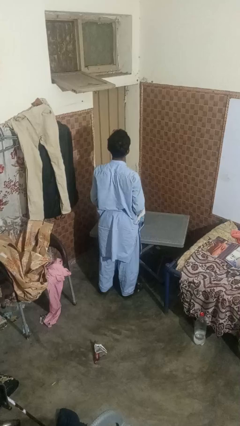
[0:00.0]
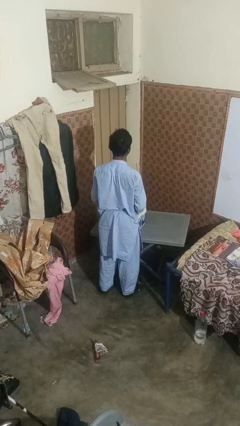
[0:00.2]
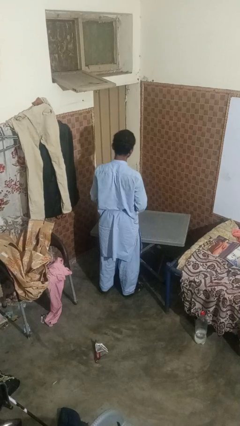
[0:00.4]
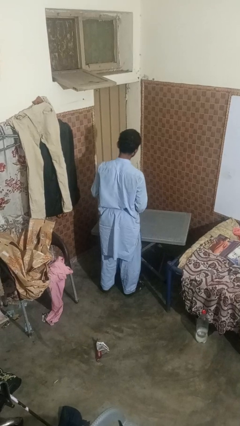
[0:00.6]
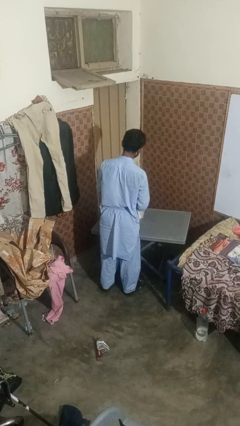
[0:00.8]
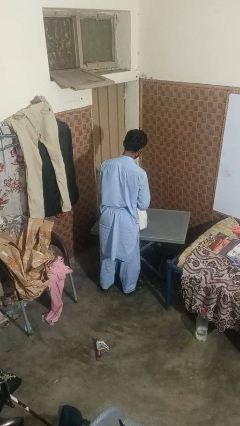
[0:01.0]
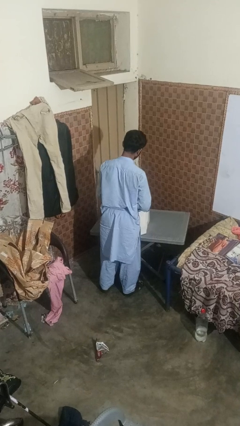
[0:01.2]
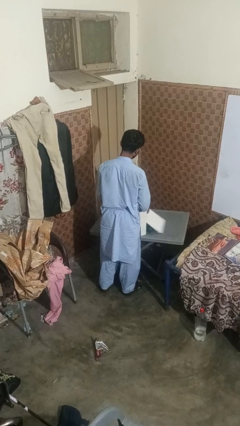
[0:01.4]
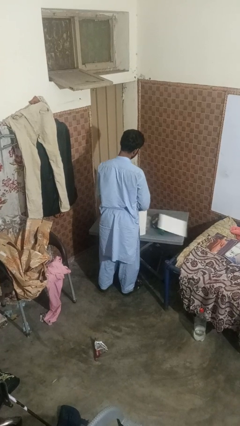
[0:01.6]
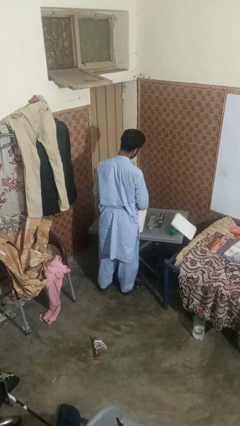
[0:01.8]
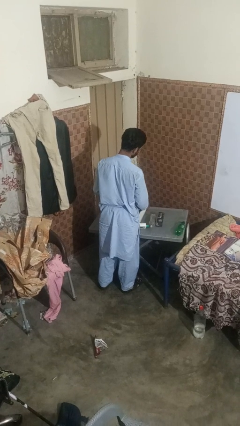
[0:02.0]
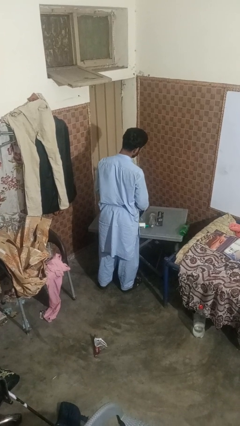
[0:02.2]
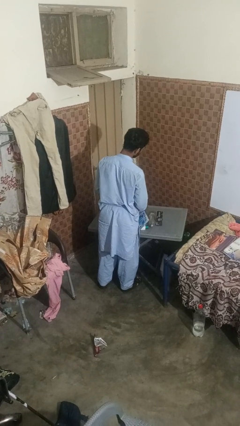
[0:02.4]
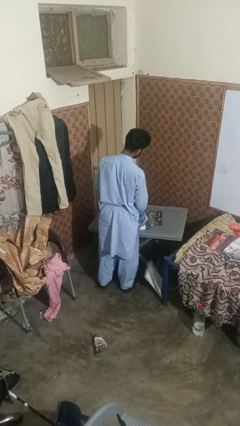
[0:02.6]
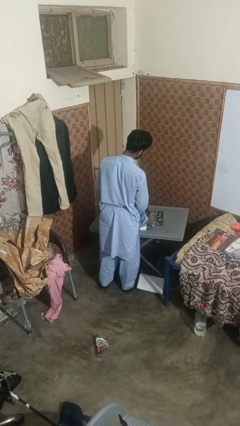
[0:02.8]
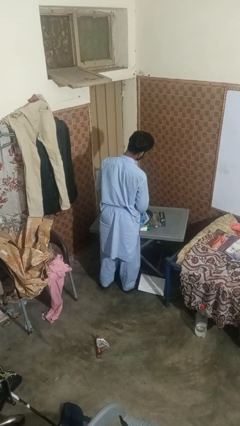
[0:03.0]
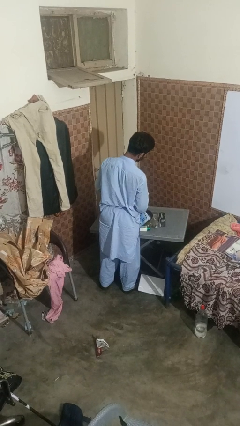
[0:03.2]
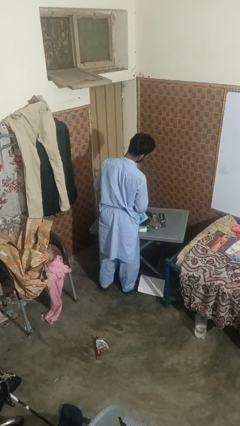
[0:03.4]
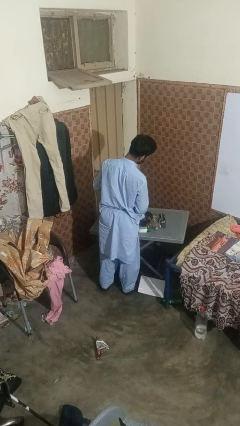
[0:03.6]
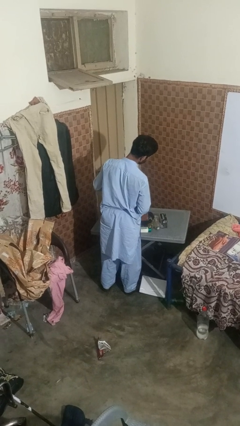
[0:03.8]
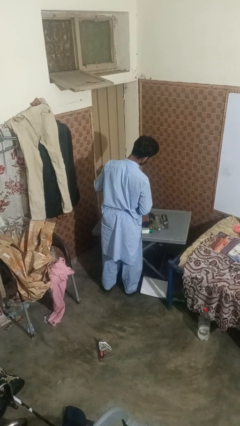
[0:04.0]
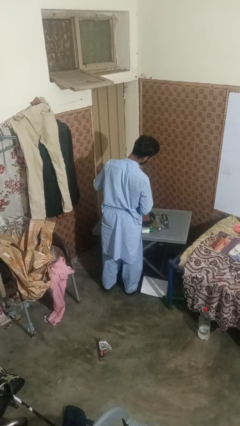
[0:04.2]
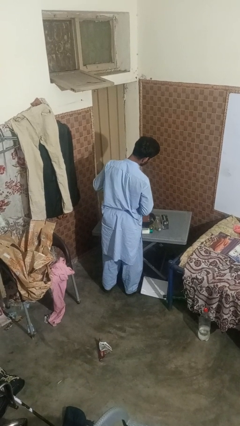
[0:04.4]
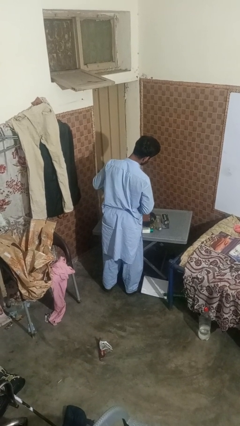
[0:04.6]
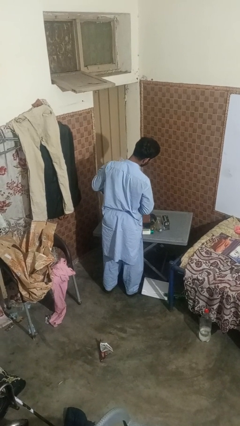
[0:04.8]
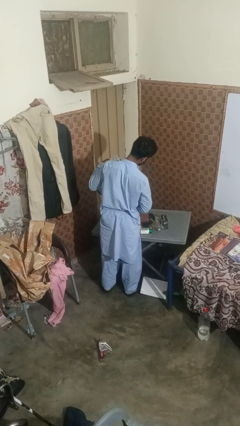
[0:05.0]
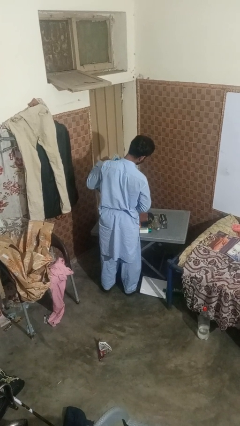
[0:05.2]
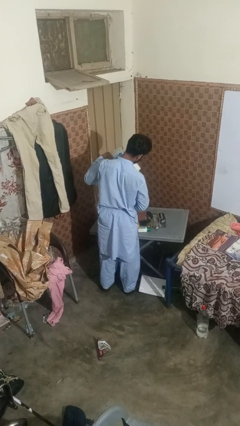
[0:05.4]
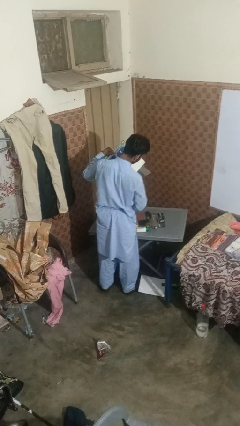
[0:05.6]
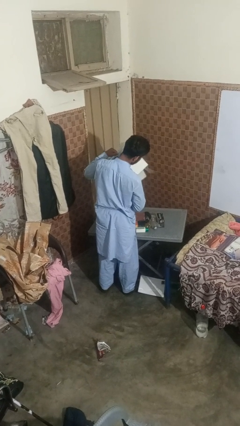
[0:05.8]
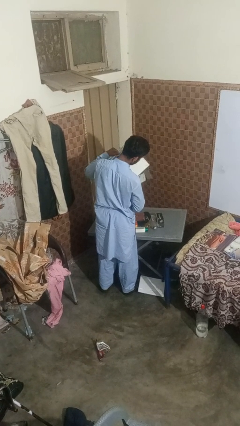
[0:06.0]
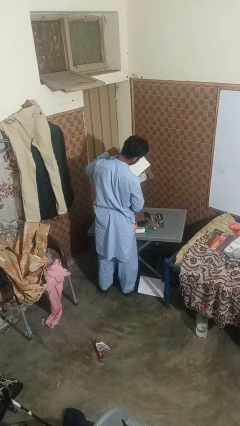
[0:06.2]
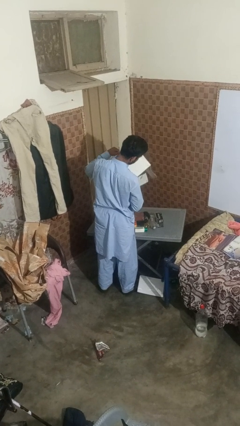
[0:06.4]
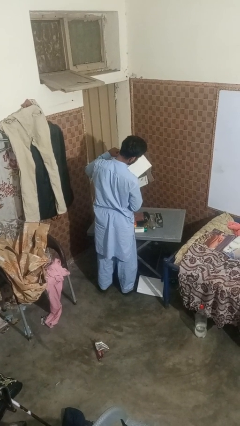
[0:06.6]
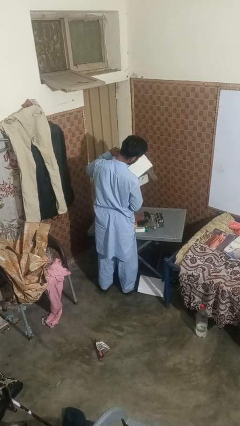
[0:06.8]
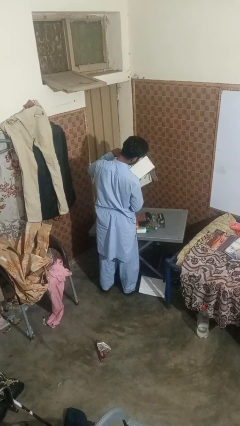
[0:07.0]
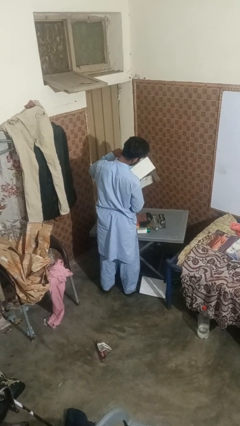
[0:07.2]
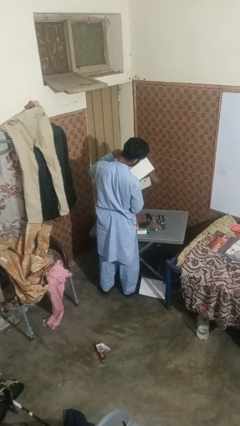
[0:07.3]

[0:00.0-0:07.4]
person unloads box onto table

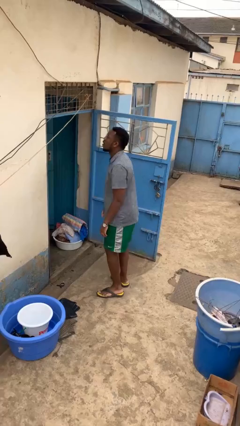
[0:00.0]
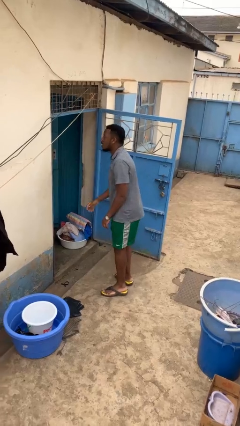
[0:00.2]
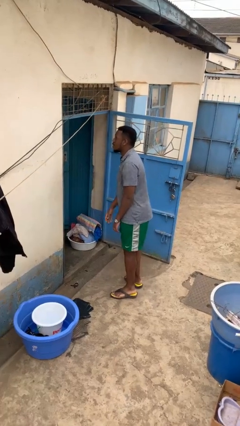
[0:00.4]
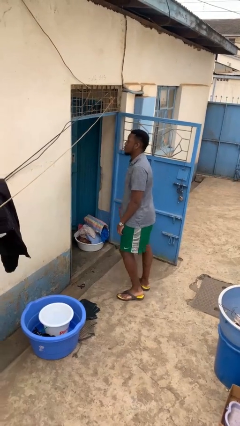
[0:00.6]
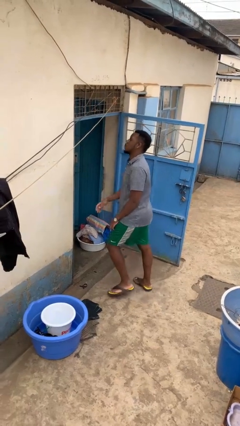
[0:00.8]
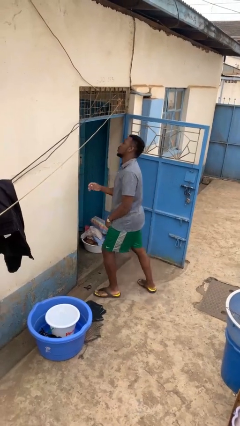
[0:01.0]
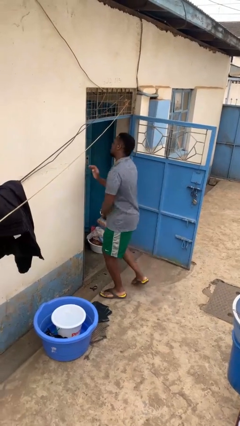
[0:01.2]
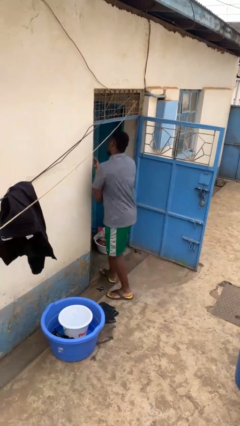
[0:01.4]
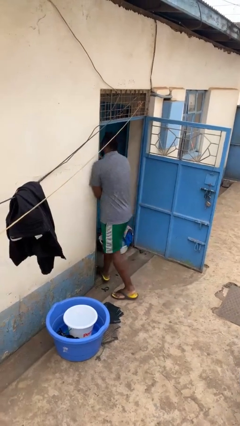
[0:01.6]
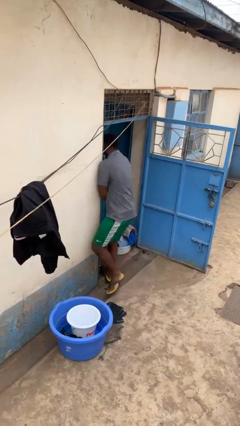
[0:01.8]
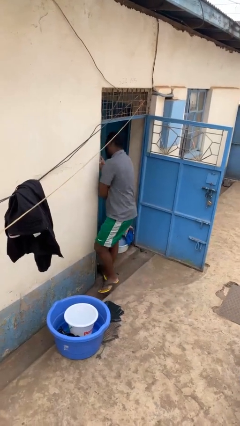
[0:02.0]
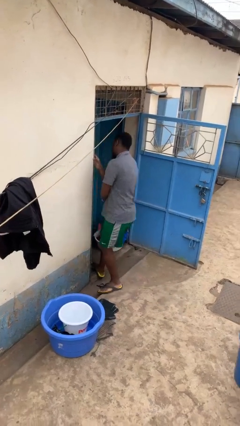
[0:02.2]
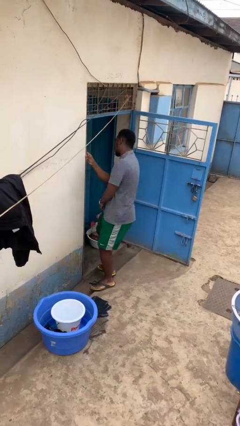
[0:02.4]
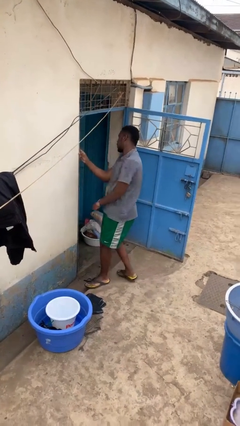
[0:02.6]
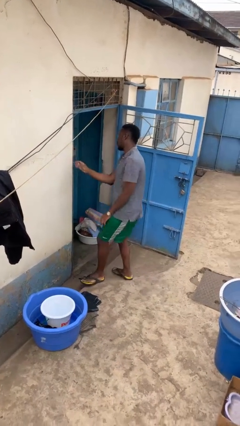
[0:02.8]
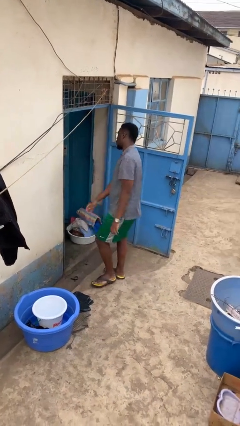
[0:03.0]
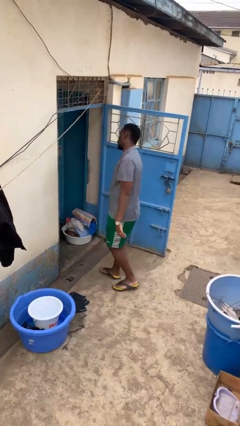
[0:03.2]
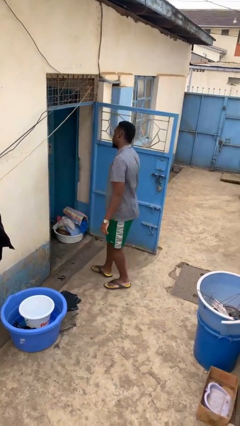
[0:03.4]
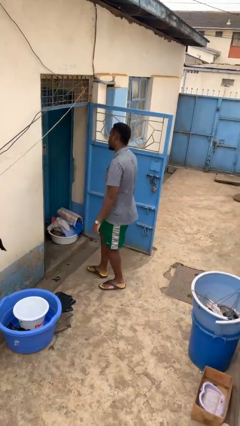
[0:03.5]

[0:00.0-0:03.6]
person bumps into wall

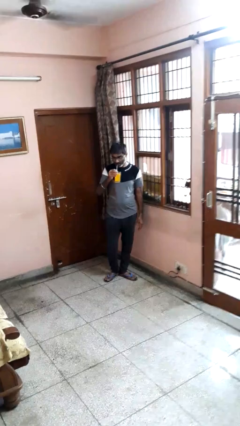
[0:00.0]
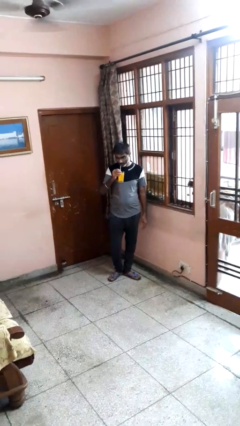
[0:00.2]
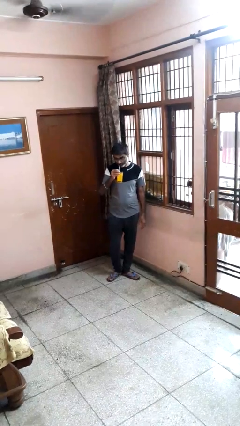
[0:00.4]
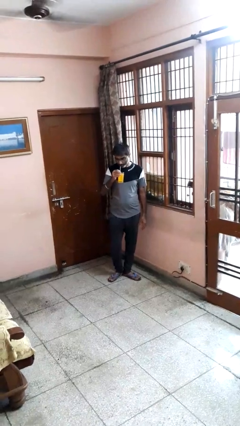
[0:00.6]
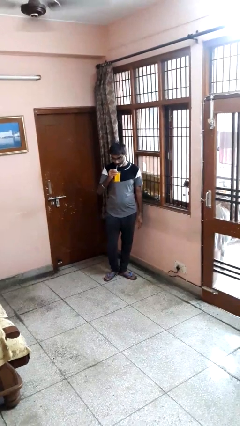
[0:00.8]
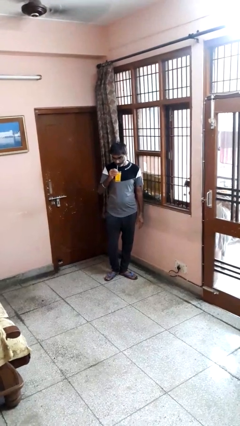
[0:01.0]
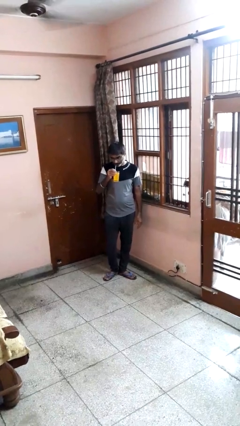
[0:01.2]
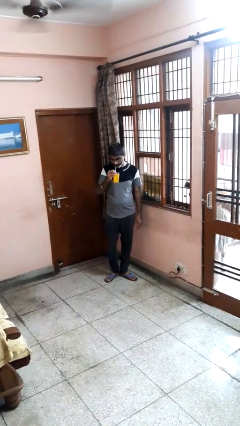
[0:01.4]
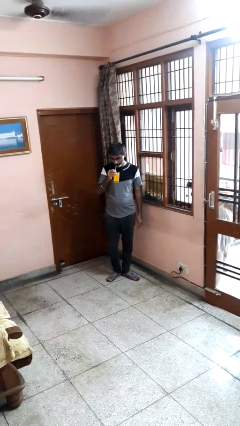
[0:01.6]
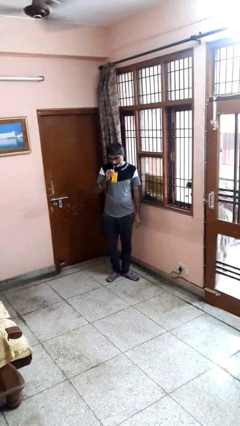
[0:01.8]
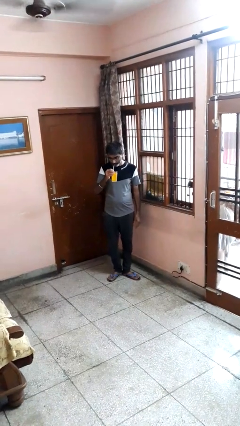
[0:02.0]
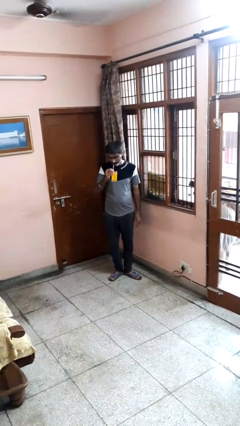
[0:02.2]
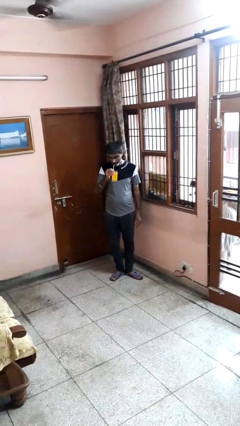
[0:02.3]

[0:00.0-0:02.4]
person drinks from straw

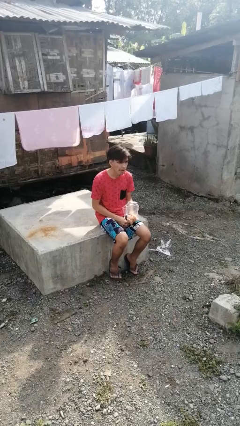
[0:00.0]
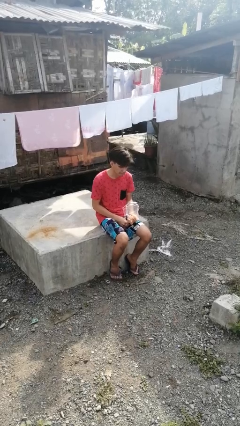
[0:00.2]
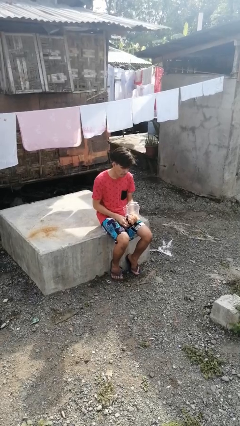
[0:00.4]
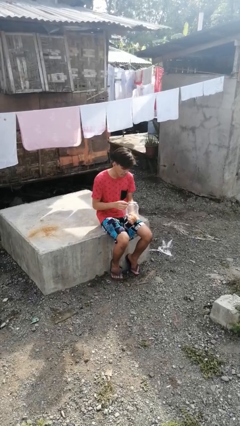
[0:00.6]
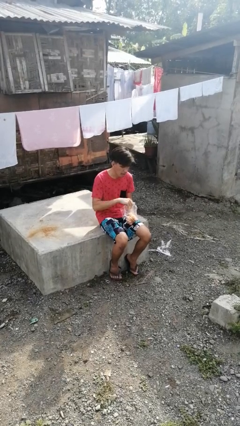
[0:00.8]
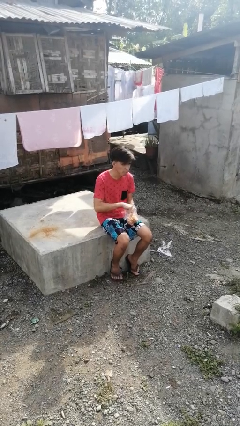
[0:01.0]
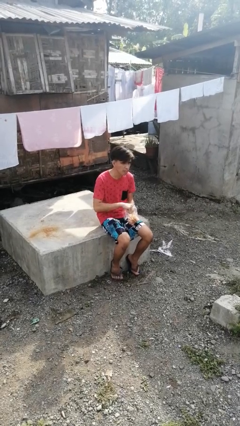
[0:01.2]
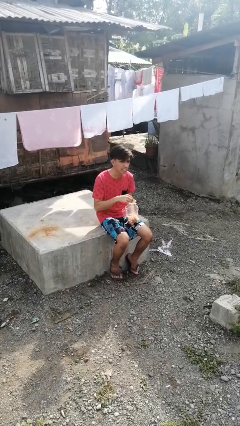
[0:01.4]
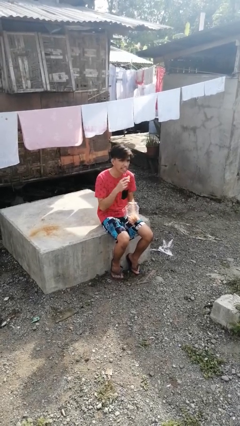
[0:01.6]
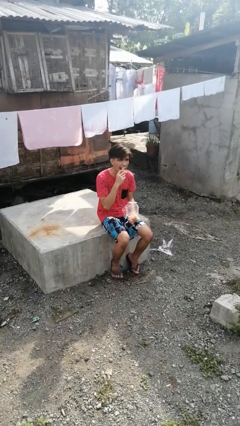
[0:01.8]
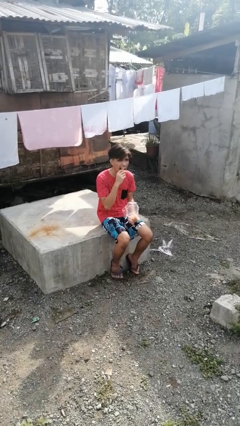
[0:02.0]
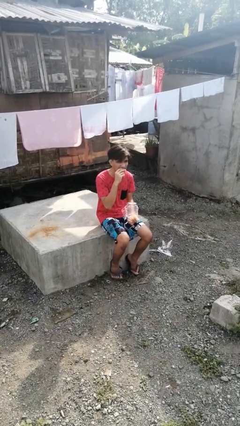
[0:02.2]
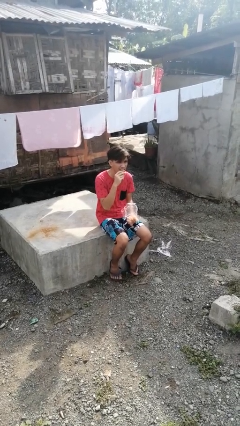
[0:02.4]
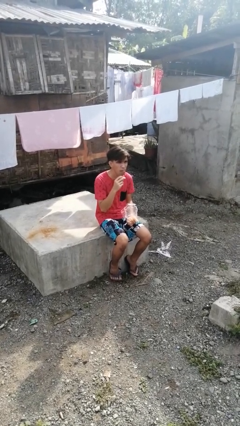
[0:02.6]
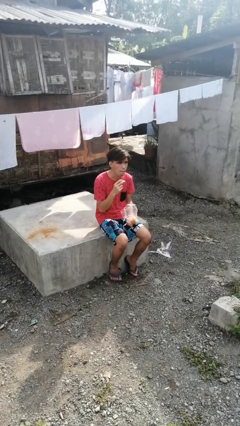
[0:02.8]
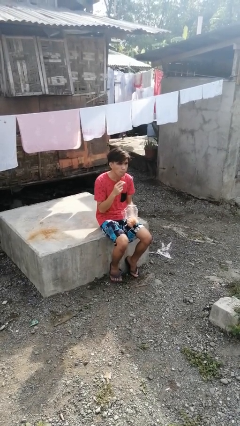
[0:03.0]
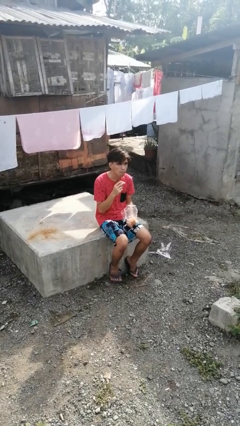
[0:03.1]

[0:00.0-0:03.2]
person eats snack from bag

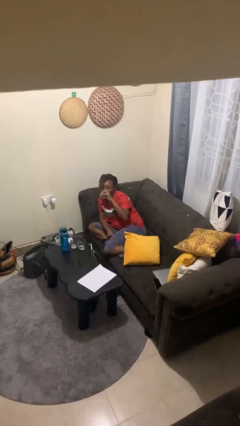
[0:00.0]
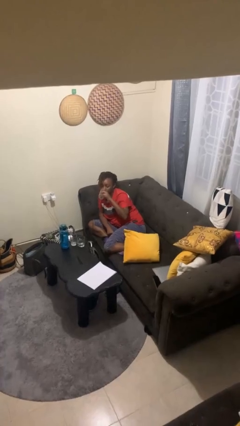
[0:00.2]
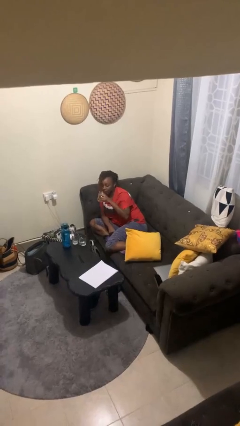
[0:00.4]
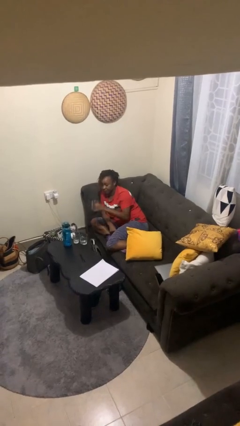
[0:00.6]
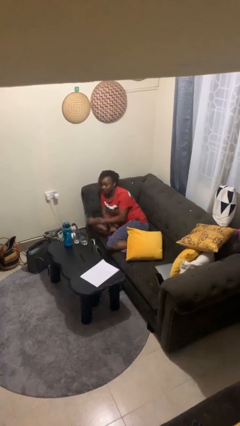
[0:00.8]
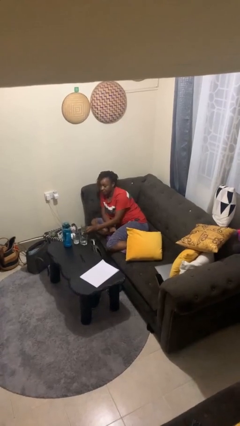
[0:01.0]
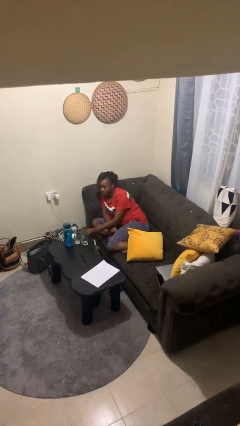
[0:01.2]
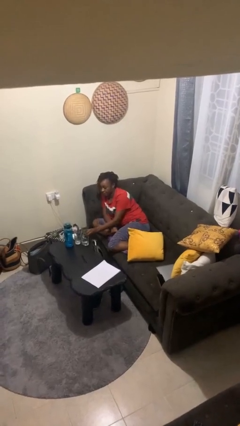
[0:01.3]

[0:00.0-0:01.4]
person puts down object on table
